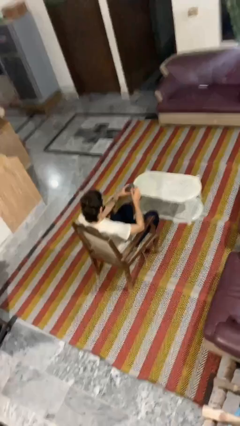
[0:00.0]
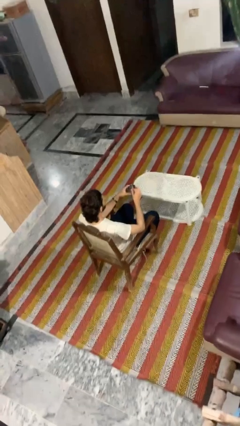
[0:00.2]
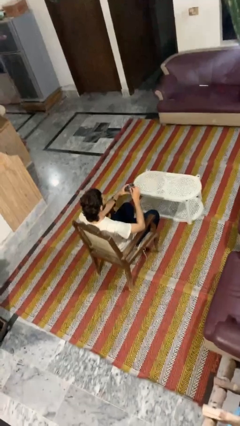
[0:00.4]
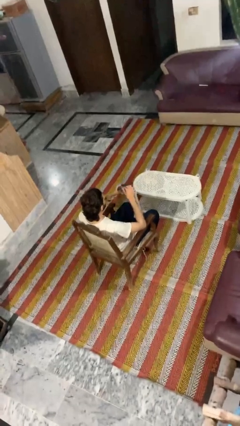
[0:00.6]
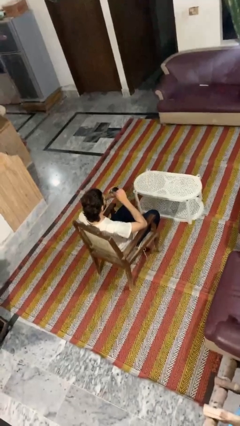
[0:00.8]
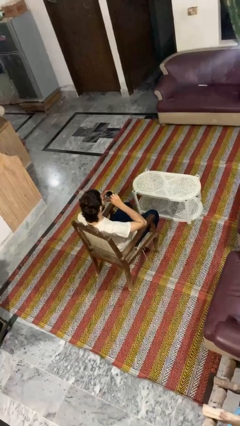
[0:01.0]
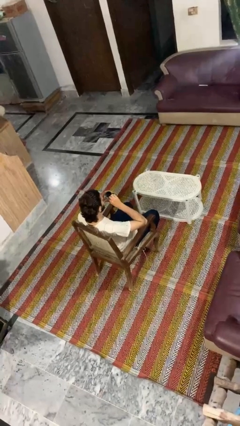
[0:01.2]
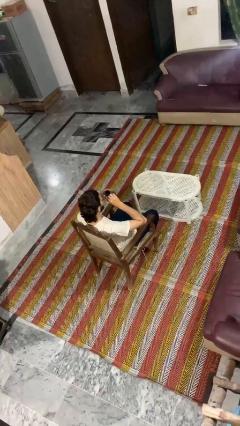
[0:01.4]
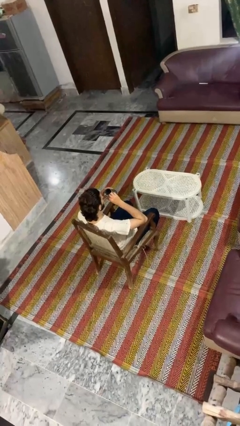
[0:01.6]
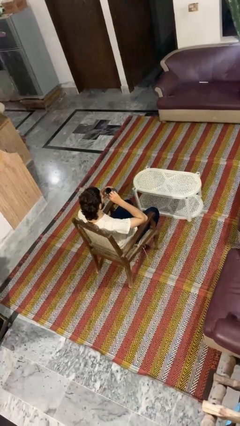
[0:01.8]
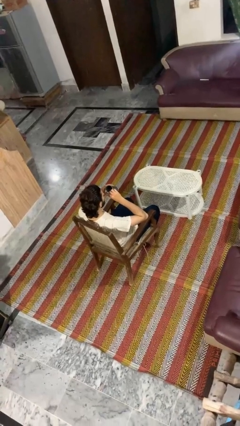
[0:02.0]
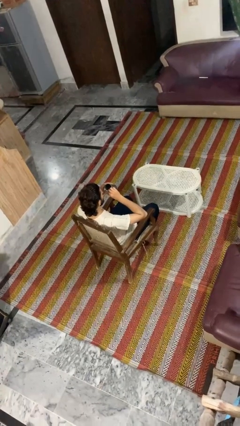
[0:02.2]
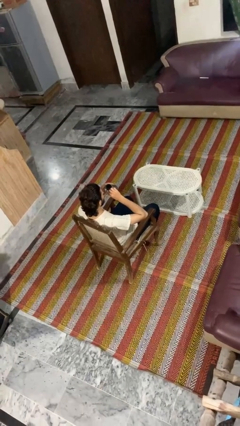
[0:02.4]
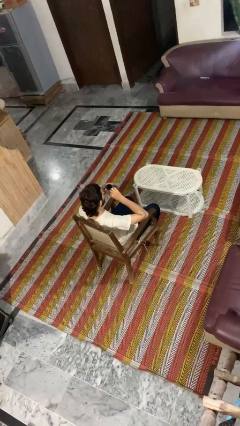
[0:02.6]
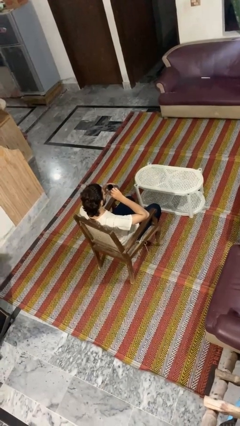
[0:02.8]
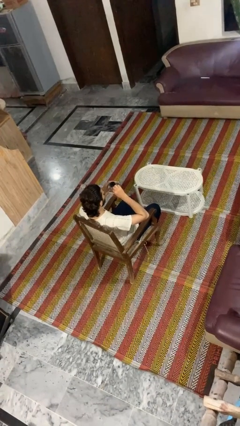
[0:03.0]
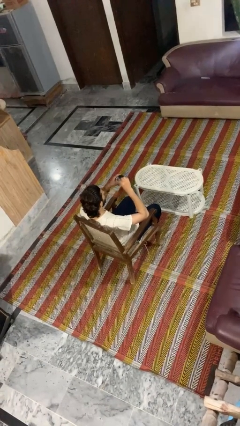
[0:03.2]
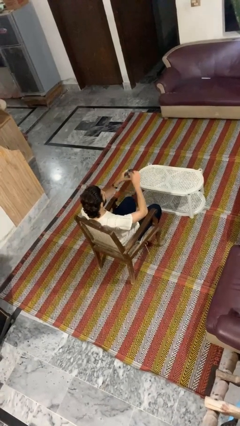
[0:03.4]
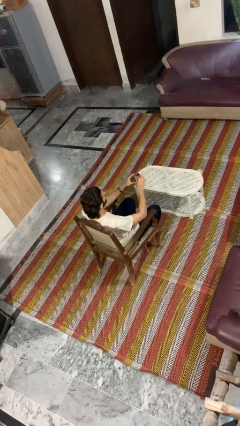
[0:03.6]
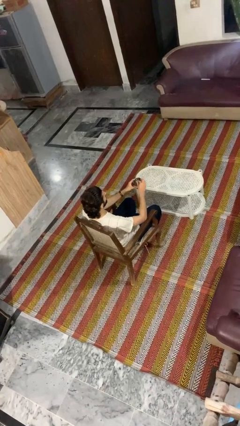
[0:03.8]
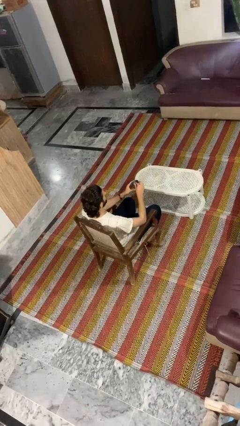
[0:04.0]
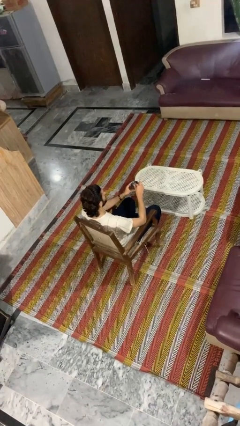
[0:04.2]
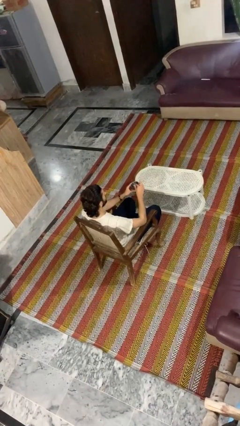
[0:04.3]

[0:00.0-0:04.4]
person drinks from straw

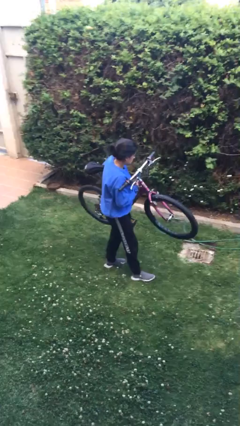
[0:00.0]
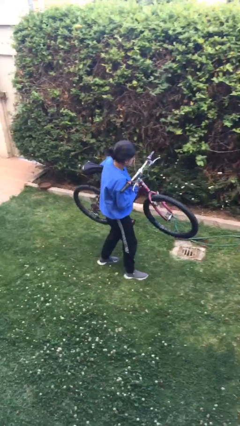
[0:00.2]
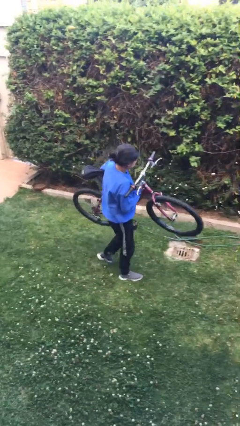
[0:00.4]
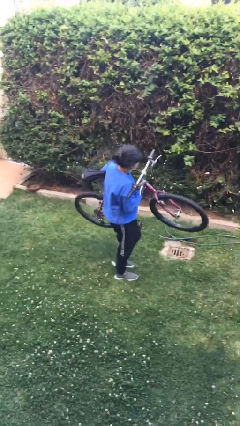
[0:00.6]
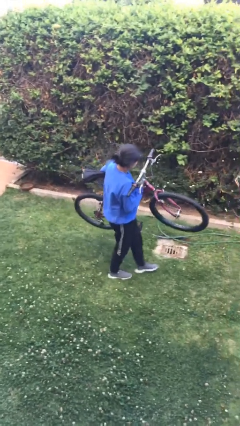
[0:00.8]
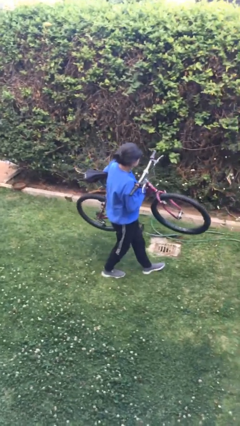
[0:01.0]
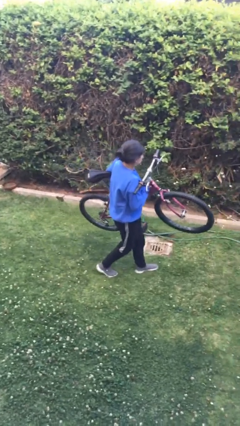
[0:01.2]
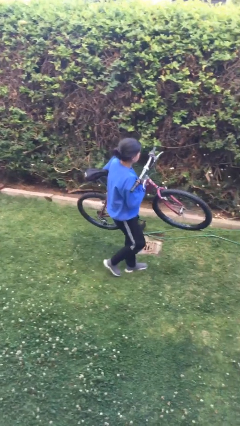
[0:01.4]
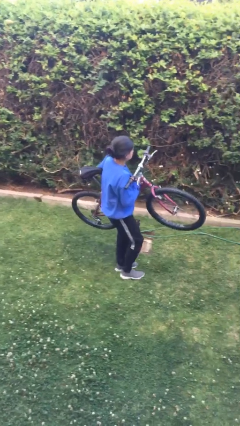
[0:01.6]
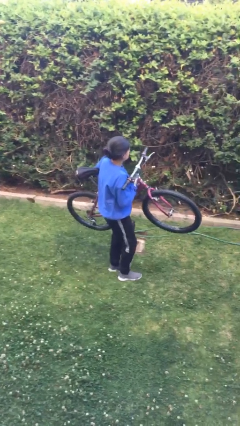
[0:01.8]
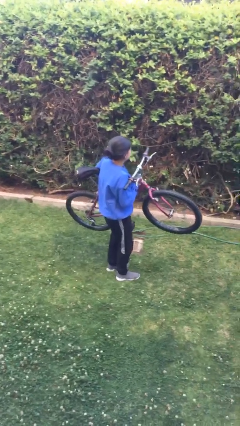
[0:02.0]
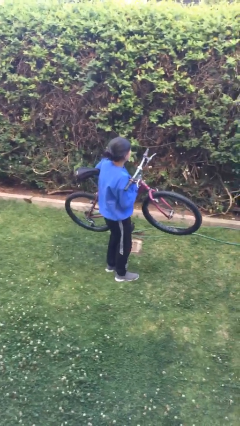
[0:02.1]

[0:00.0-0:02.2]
person carries bicycle

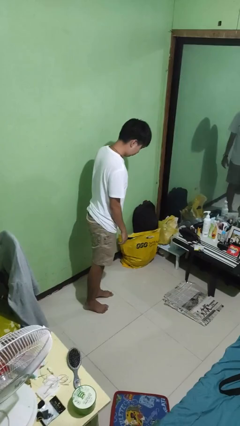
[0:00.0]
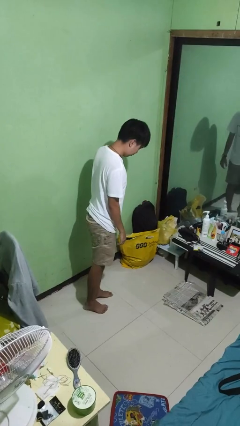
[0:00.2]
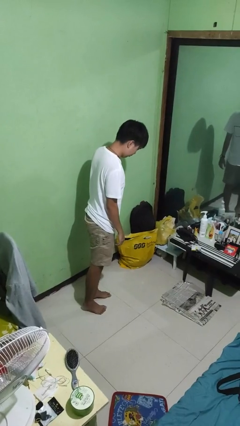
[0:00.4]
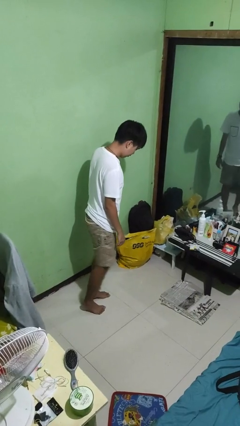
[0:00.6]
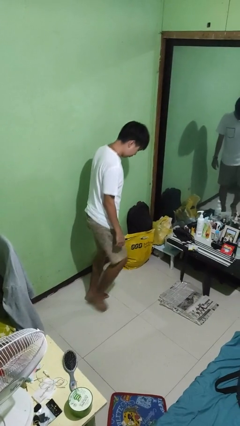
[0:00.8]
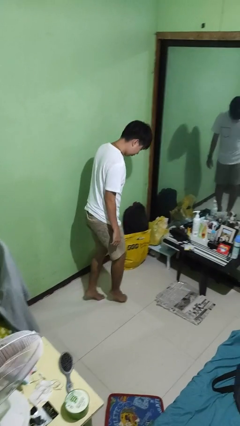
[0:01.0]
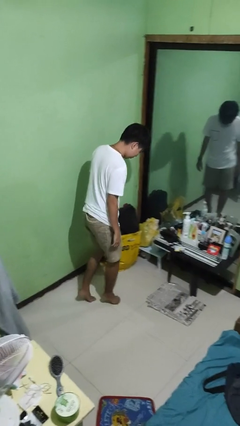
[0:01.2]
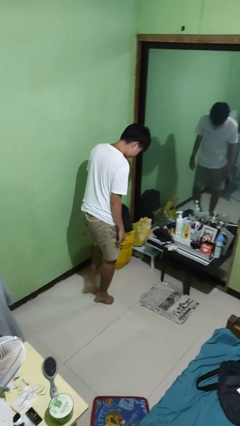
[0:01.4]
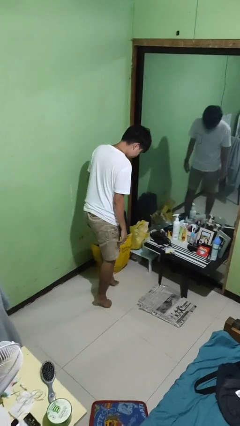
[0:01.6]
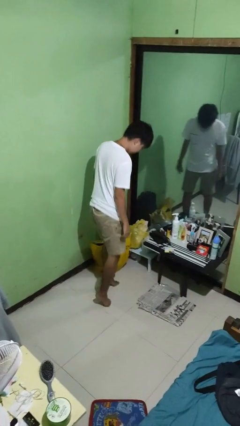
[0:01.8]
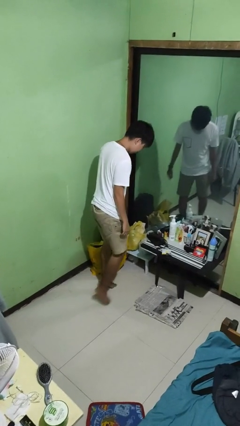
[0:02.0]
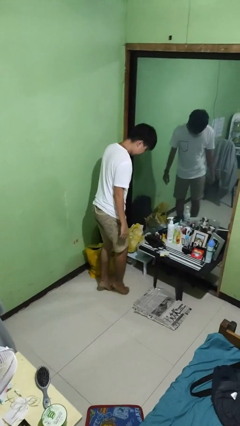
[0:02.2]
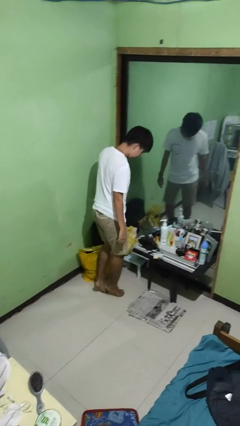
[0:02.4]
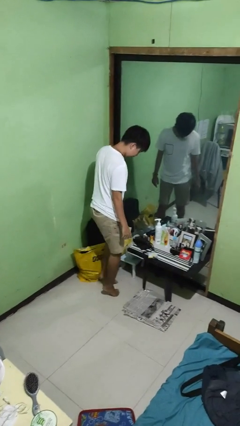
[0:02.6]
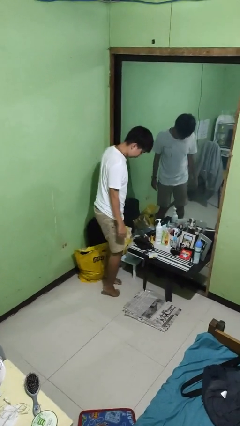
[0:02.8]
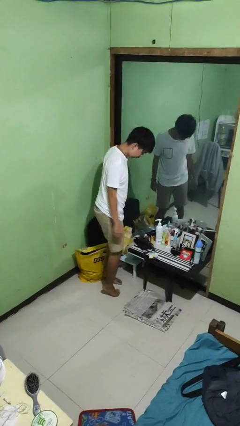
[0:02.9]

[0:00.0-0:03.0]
person walks tiptoe

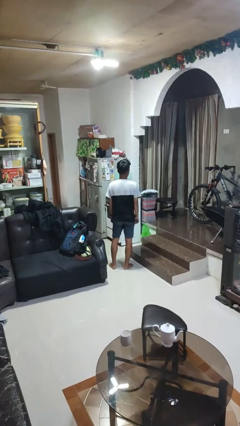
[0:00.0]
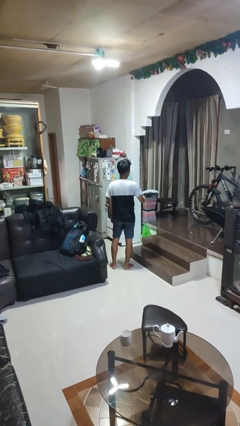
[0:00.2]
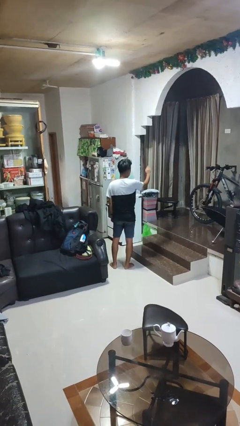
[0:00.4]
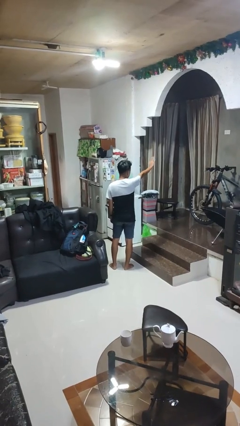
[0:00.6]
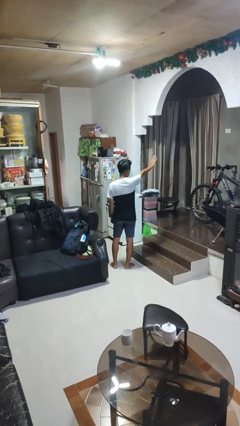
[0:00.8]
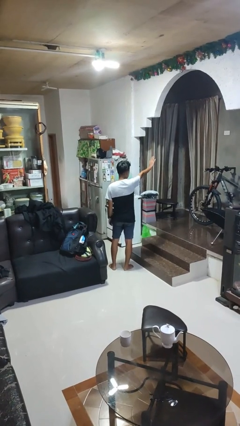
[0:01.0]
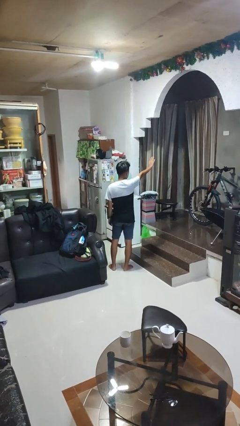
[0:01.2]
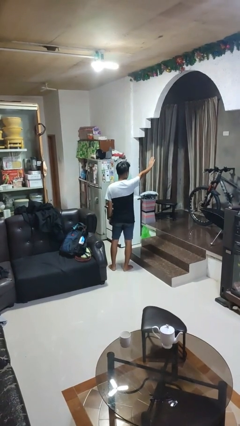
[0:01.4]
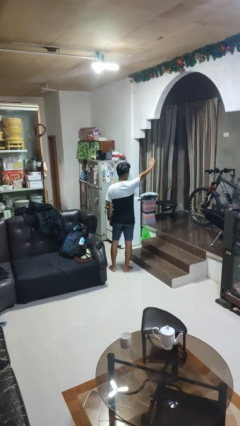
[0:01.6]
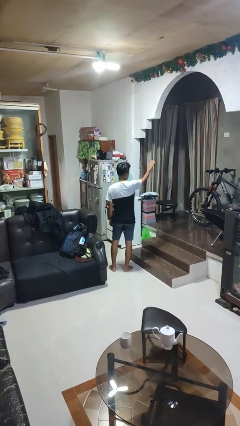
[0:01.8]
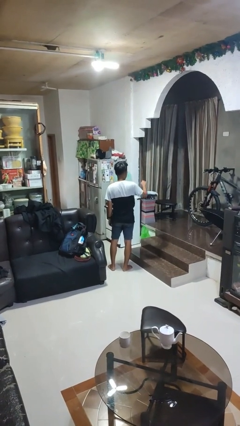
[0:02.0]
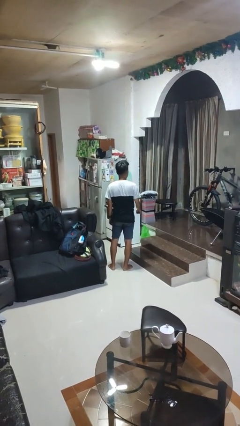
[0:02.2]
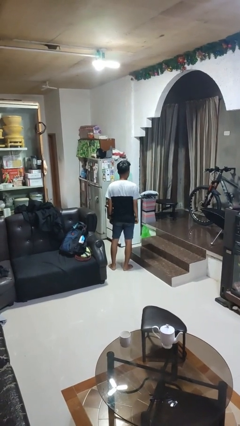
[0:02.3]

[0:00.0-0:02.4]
person gestures stop

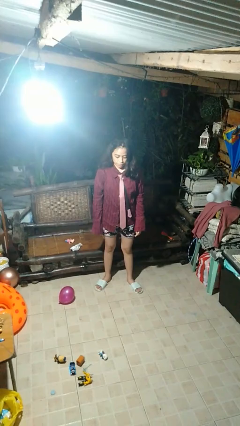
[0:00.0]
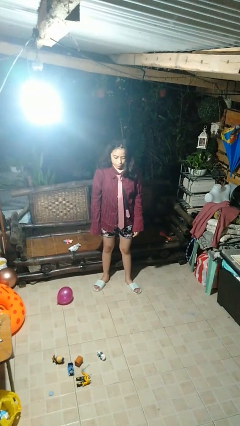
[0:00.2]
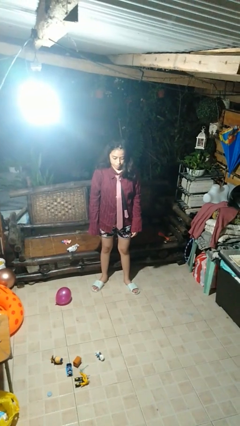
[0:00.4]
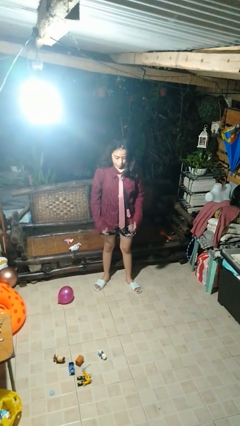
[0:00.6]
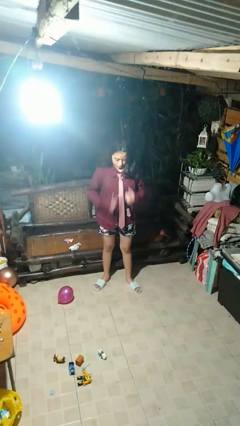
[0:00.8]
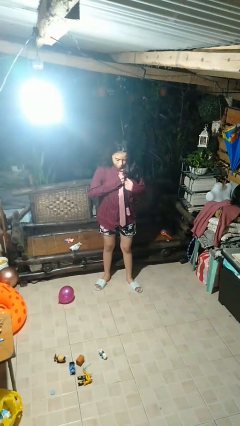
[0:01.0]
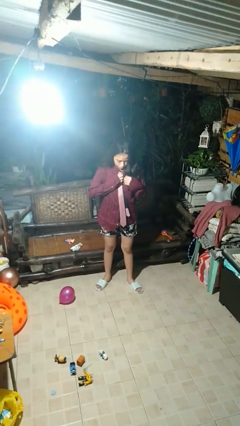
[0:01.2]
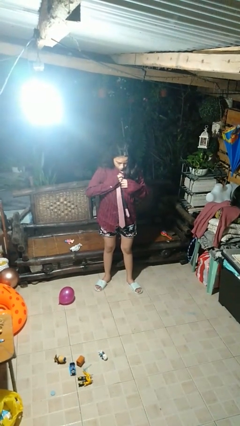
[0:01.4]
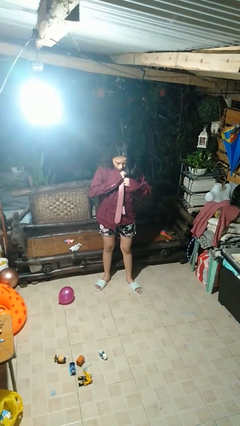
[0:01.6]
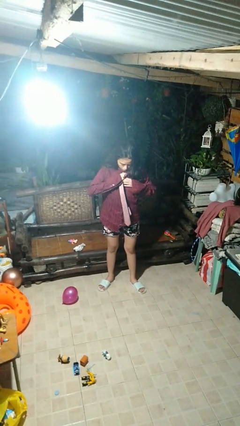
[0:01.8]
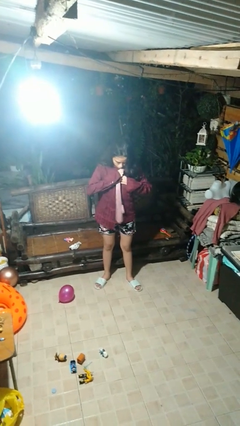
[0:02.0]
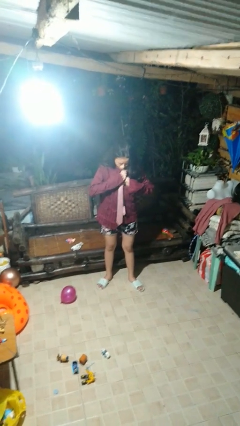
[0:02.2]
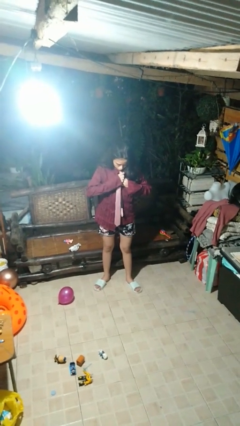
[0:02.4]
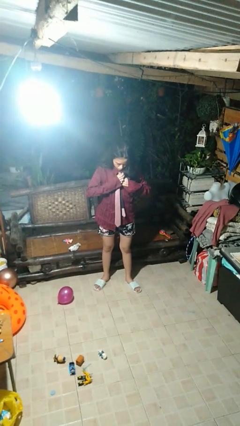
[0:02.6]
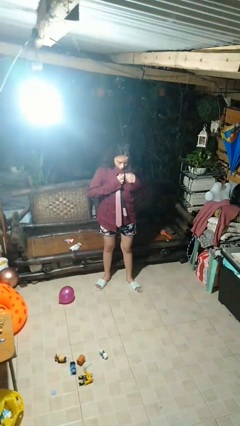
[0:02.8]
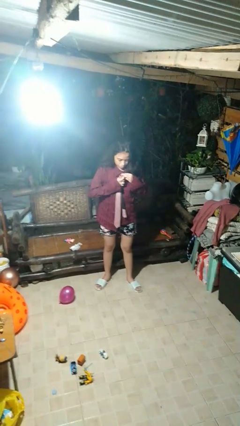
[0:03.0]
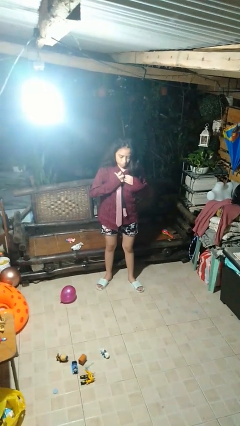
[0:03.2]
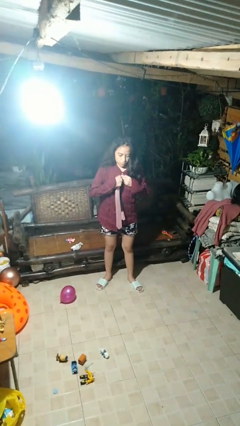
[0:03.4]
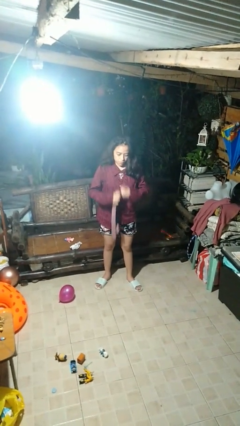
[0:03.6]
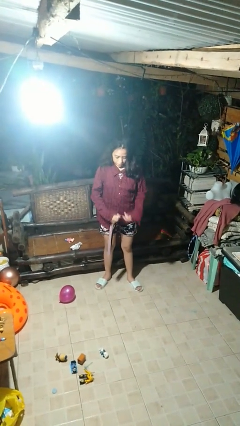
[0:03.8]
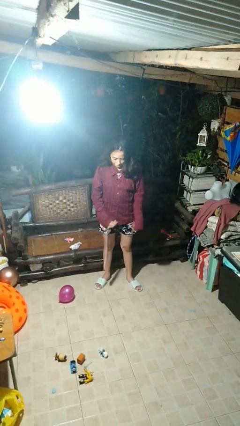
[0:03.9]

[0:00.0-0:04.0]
person takes off necktie

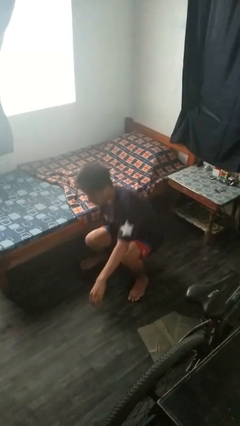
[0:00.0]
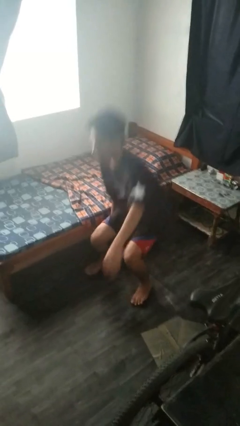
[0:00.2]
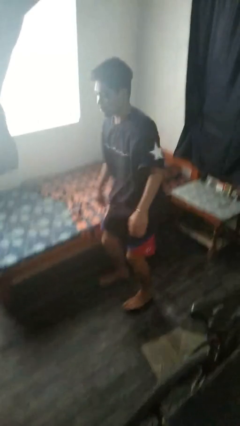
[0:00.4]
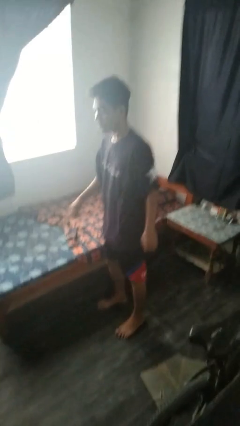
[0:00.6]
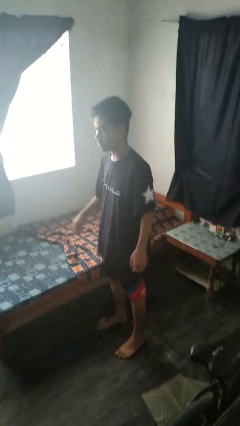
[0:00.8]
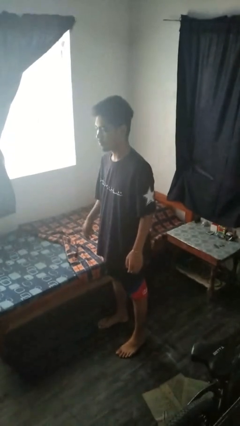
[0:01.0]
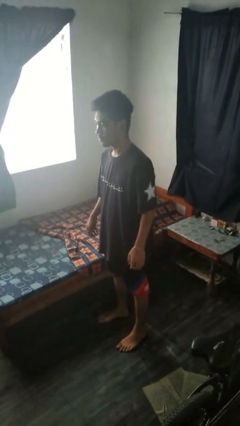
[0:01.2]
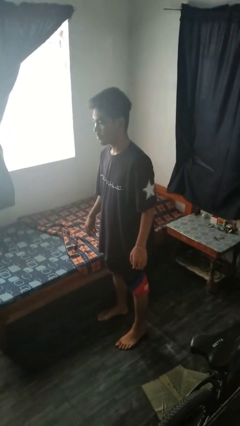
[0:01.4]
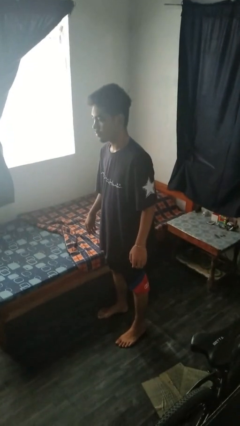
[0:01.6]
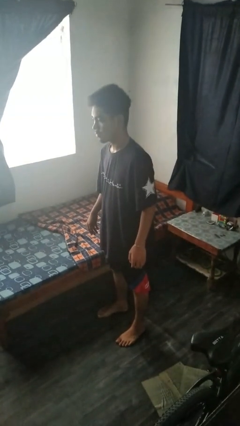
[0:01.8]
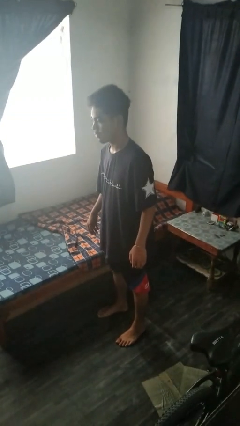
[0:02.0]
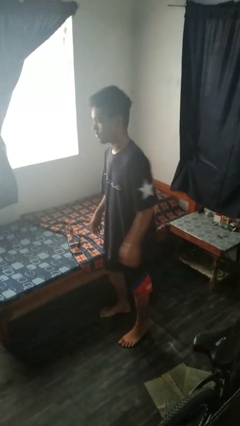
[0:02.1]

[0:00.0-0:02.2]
person stands up from floor
